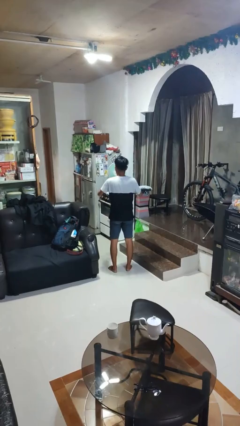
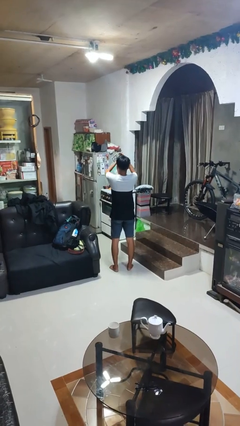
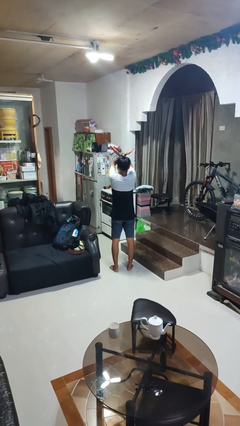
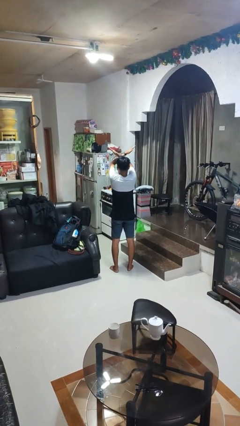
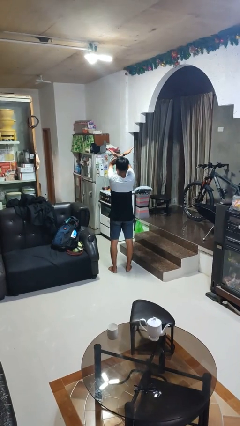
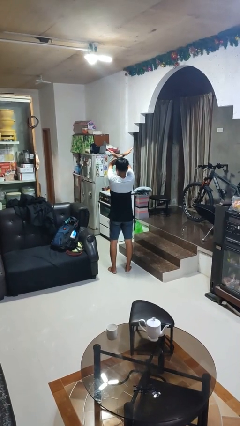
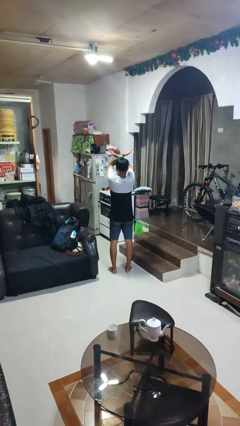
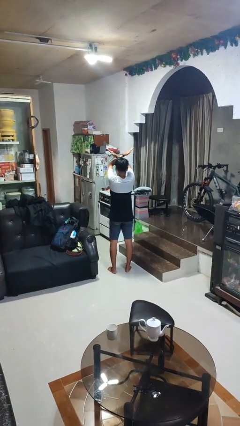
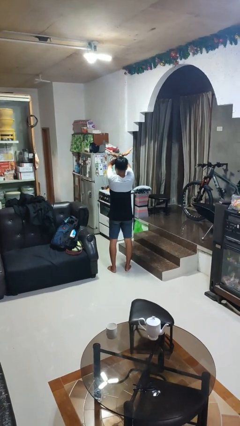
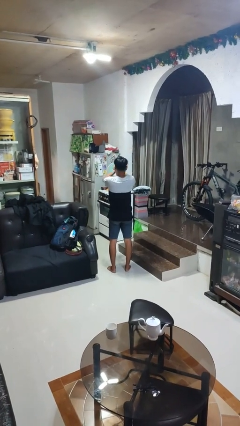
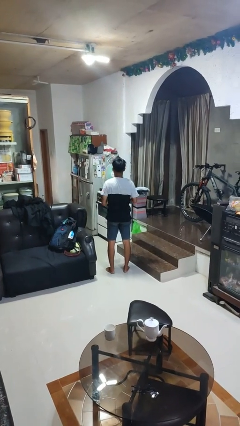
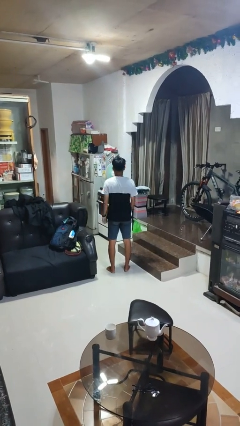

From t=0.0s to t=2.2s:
person gestures arms x

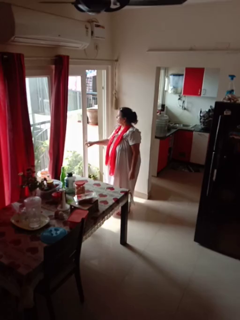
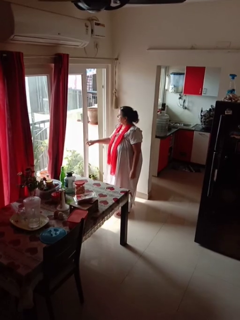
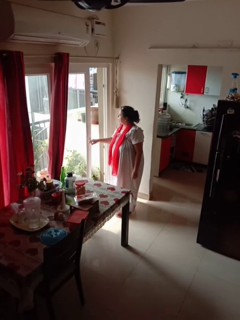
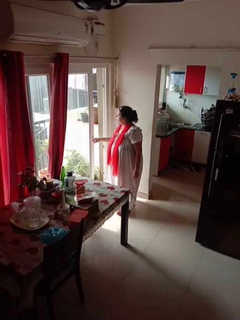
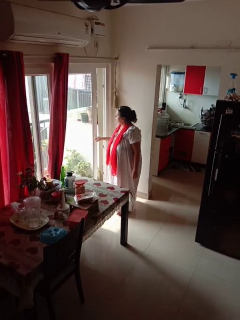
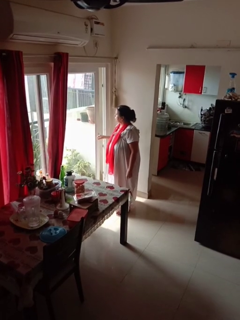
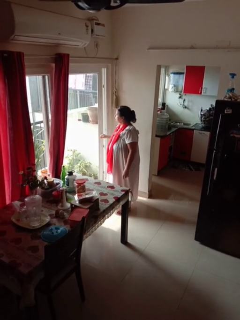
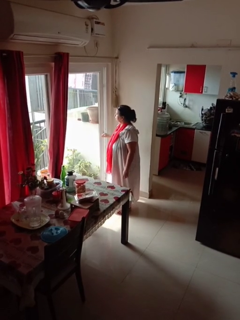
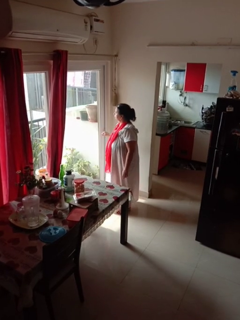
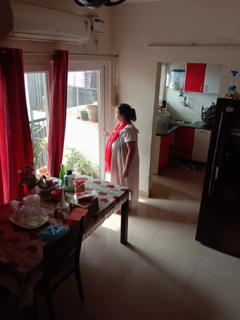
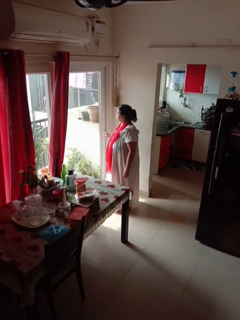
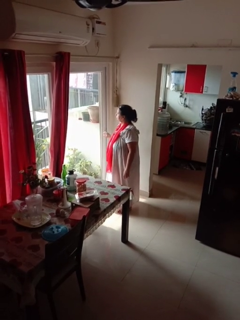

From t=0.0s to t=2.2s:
person closes sliding door

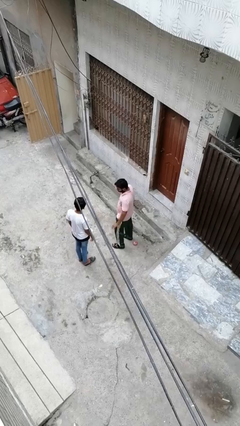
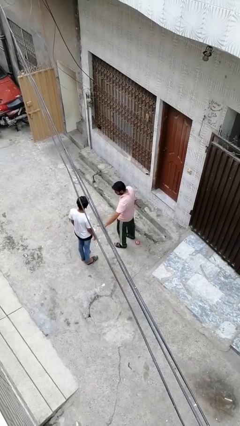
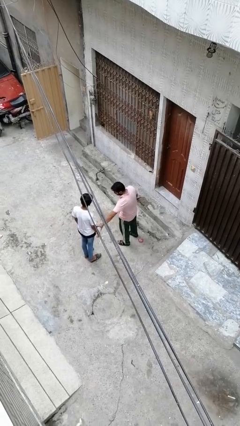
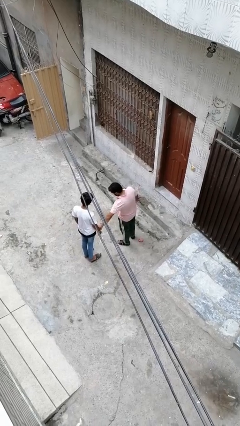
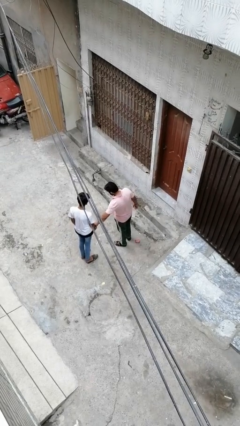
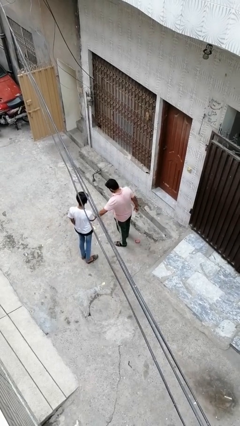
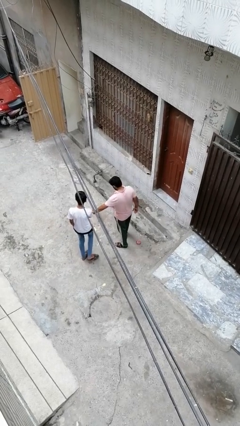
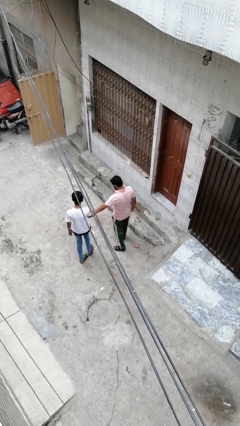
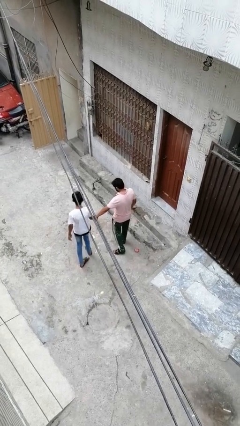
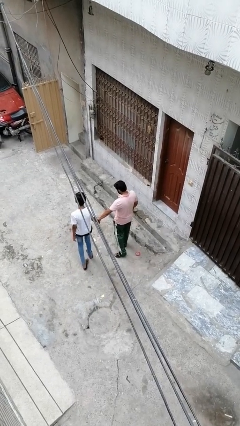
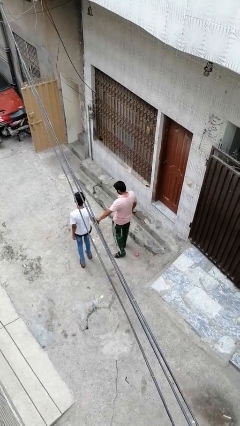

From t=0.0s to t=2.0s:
person grabs person by forearm

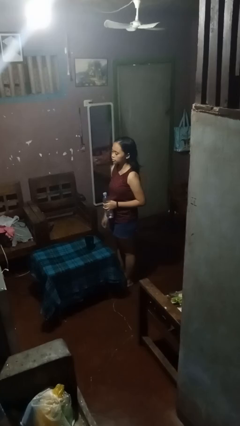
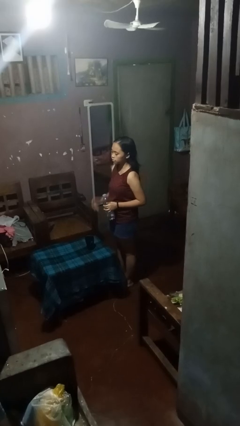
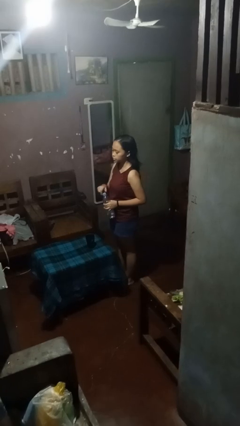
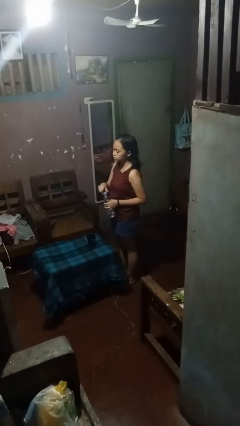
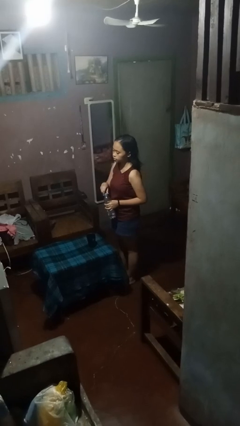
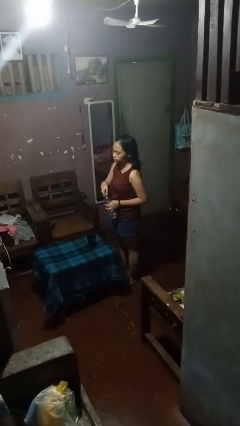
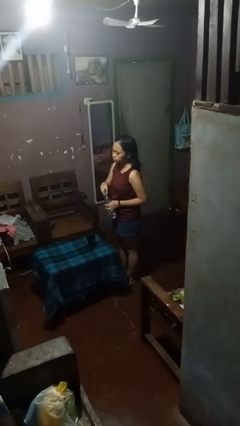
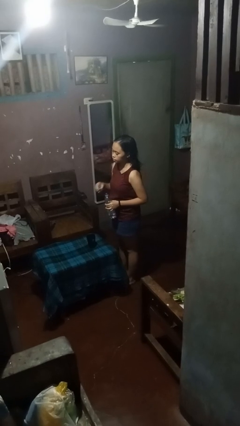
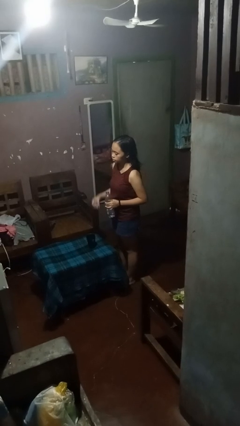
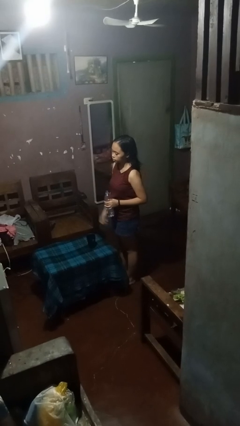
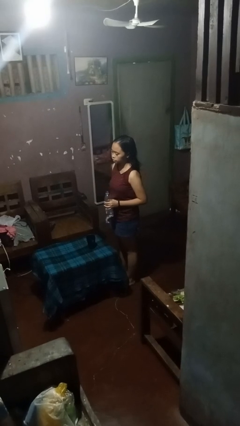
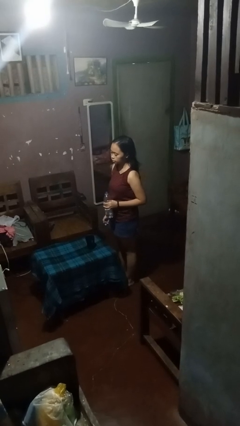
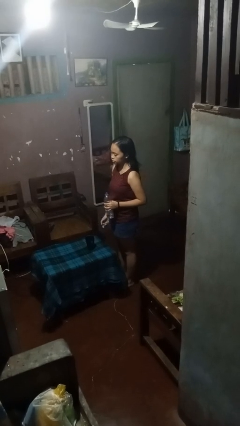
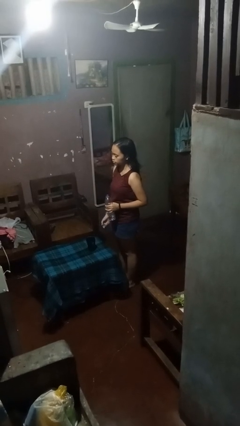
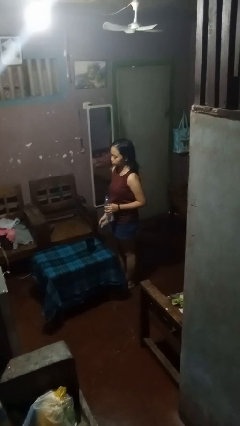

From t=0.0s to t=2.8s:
person unscrews lid from bottle

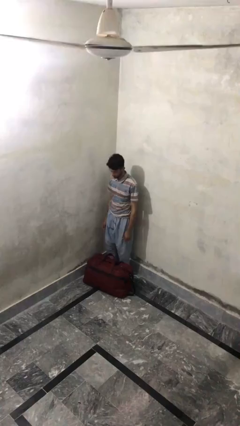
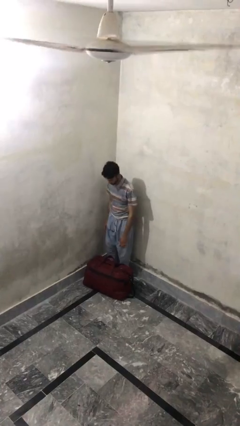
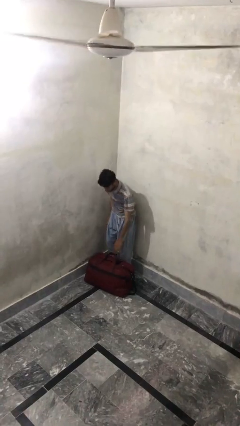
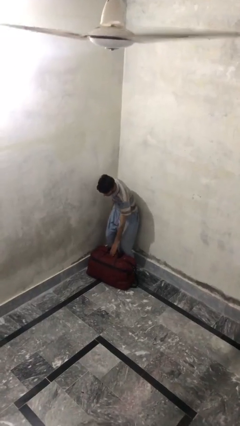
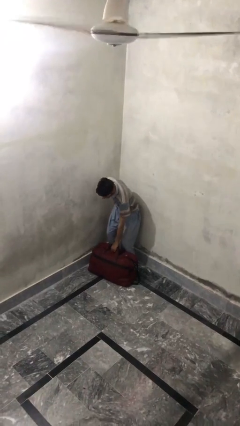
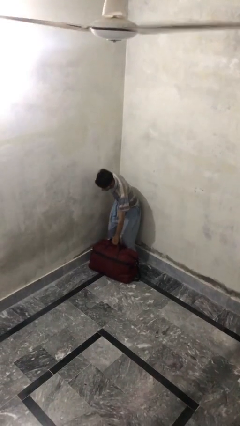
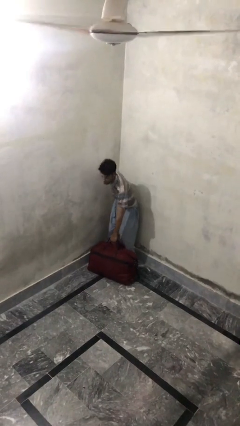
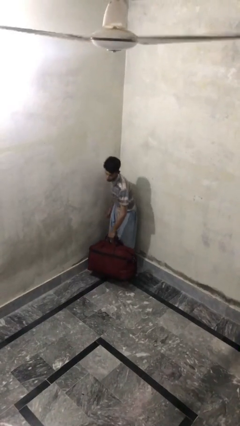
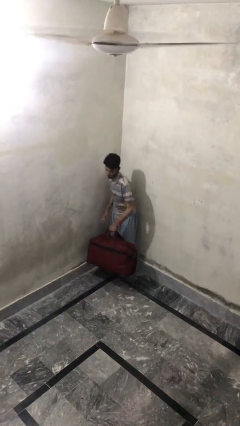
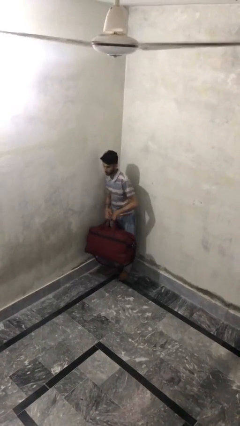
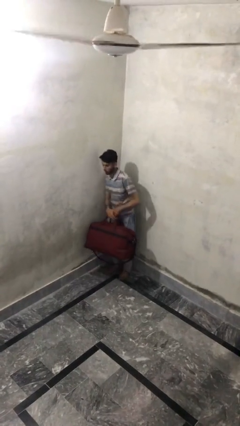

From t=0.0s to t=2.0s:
person picks up object from floor

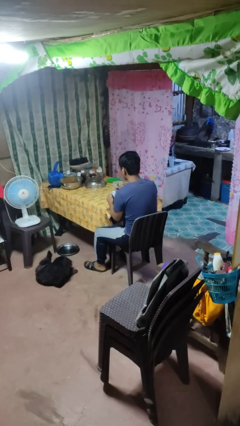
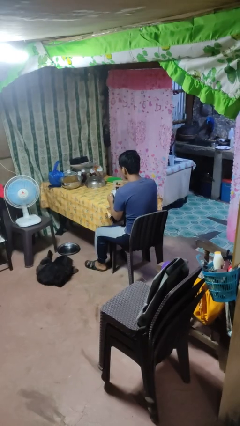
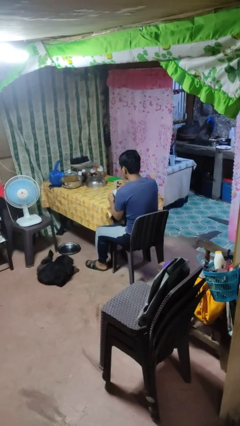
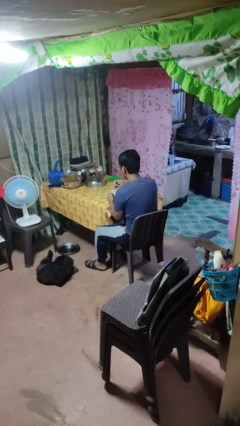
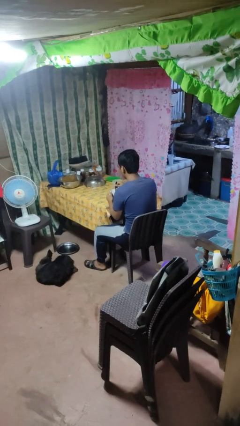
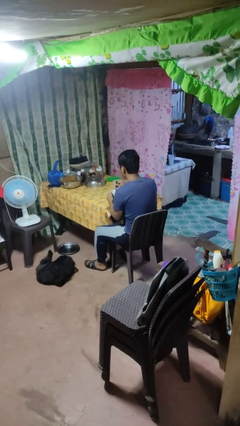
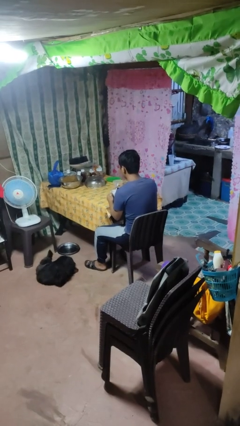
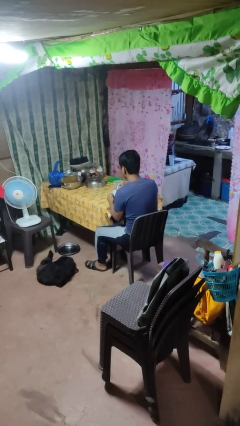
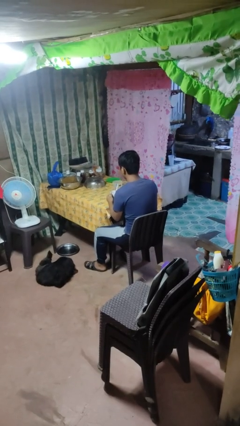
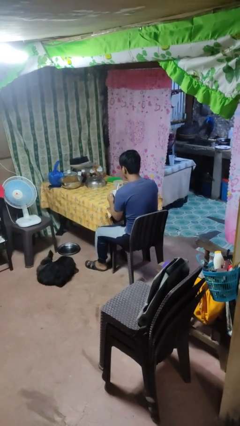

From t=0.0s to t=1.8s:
person stirs mug

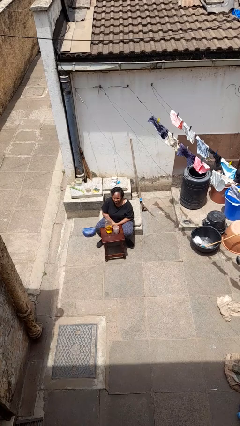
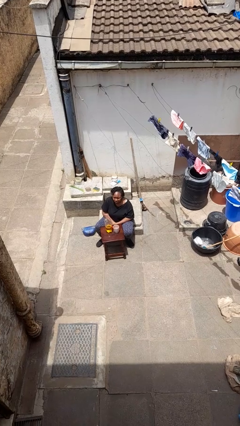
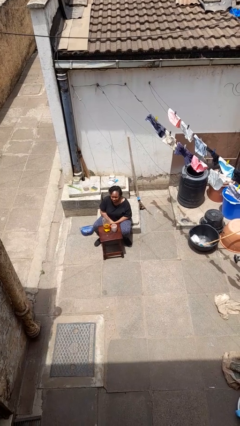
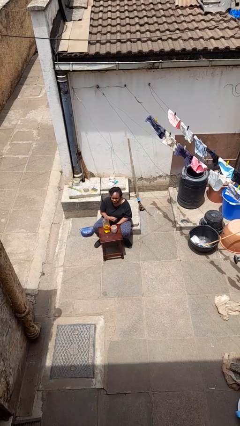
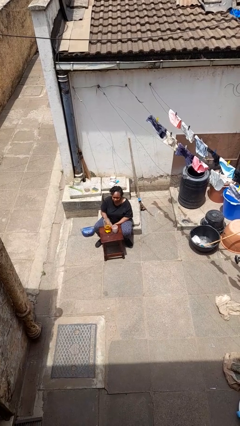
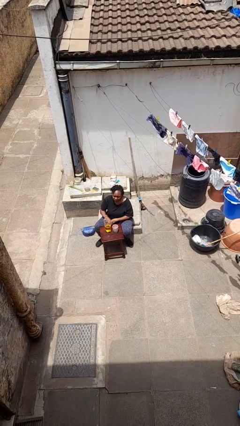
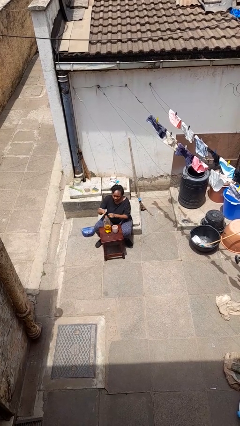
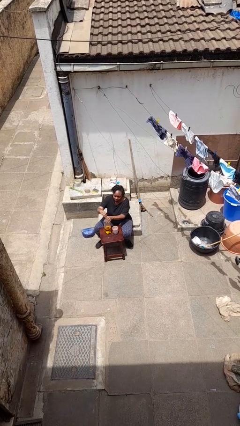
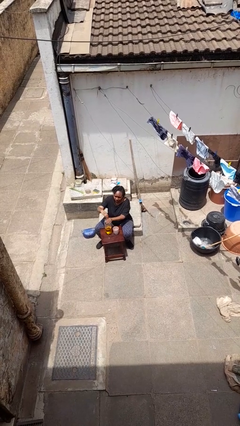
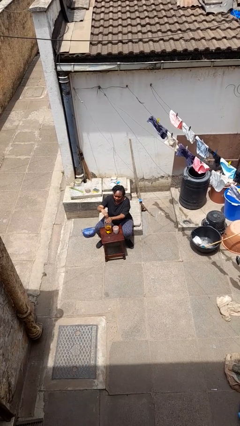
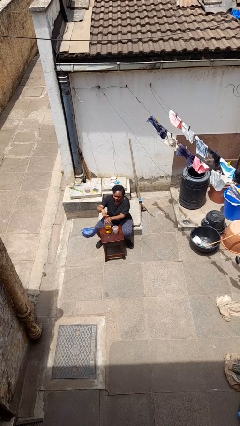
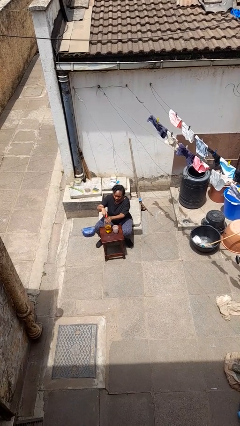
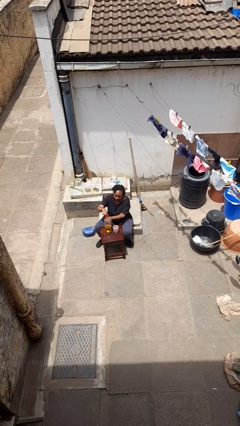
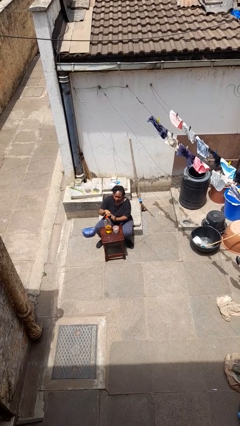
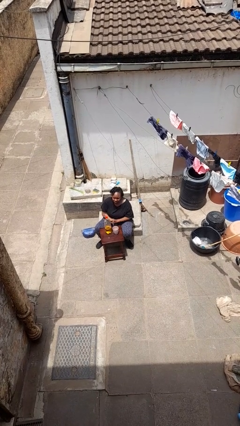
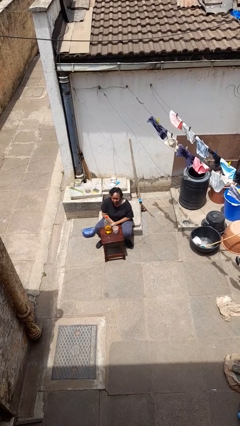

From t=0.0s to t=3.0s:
person screws lid to bottle

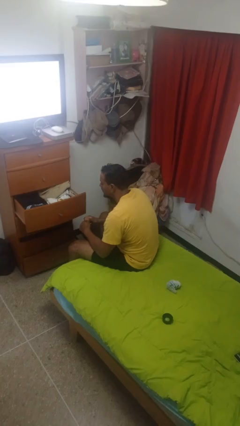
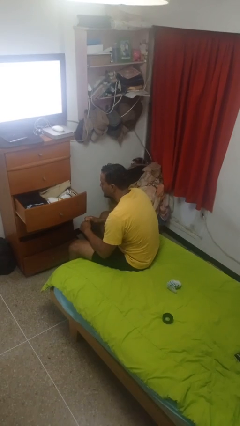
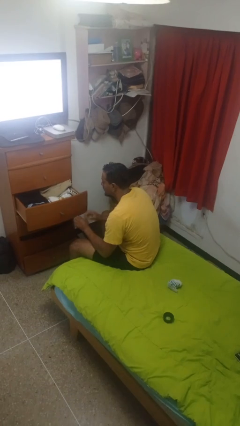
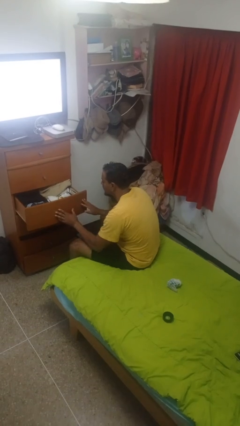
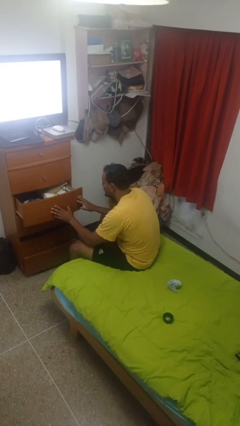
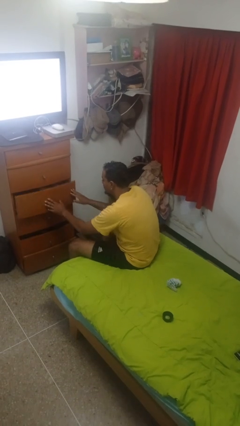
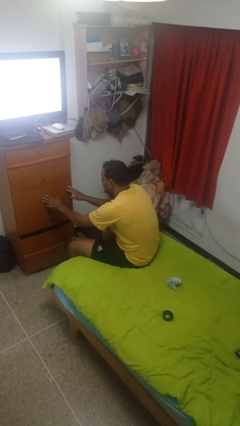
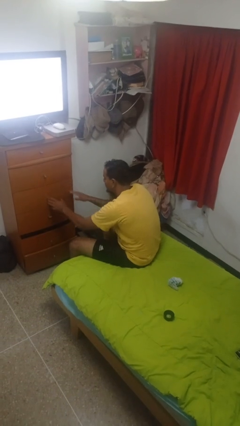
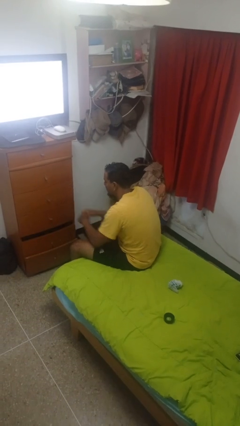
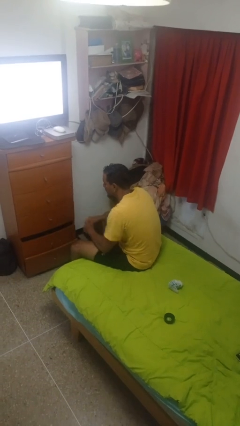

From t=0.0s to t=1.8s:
person closes dresser drawer
